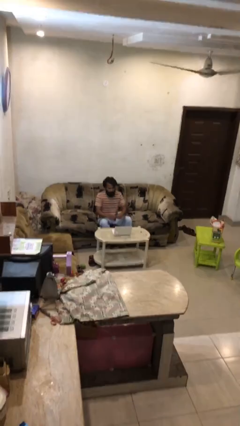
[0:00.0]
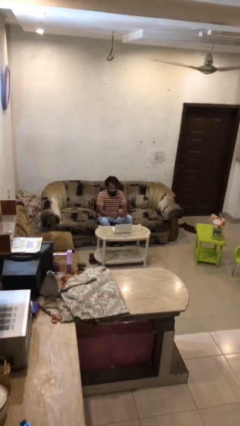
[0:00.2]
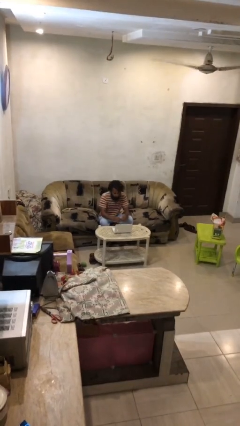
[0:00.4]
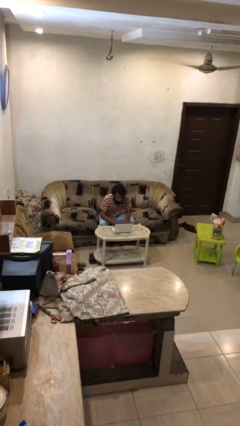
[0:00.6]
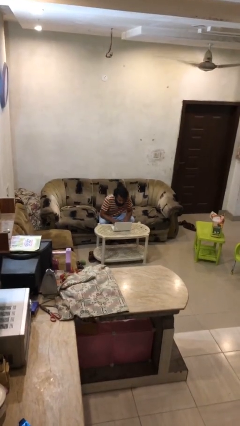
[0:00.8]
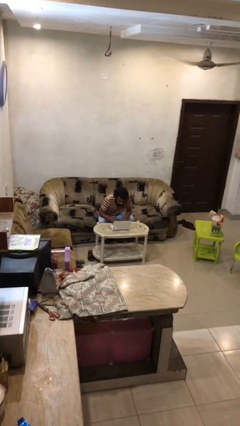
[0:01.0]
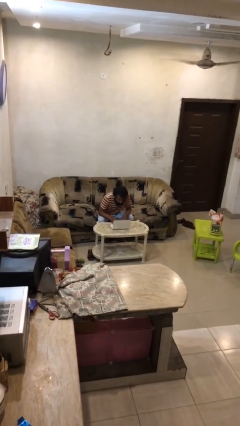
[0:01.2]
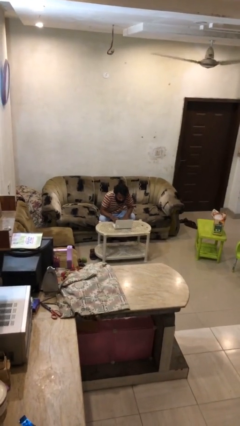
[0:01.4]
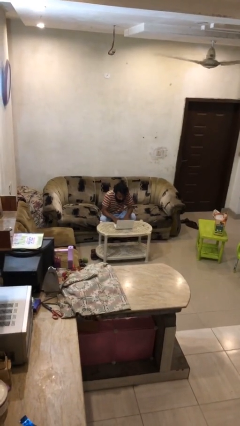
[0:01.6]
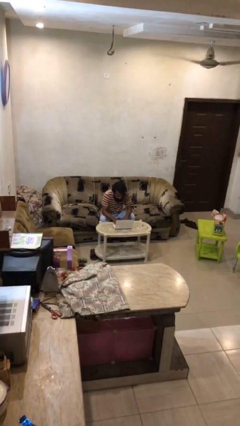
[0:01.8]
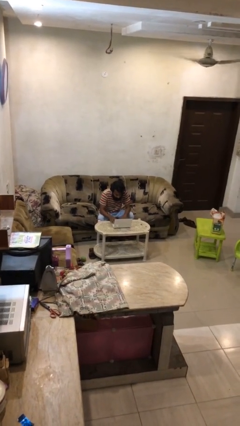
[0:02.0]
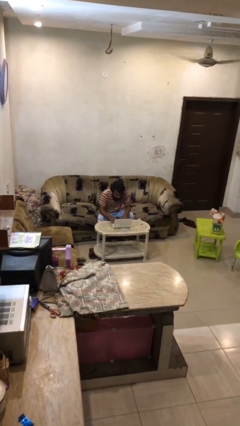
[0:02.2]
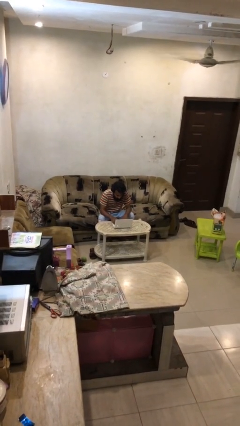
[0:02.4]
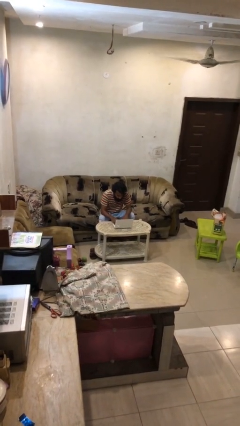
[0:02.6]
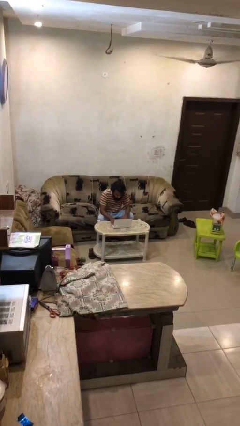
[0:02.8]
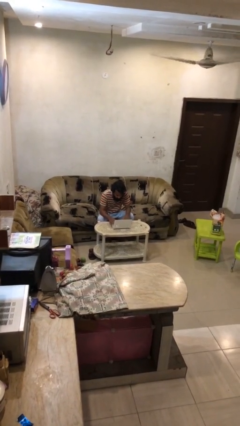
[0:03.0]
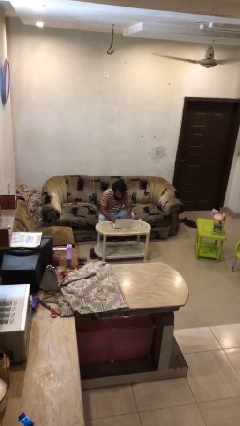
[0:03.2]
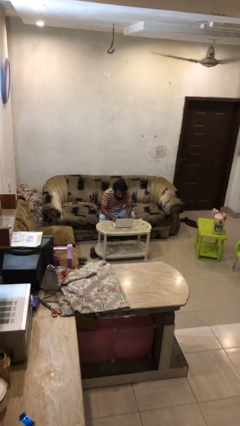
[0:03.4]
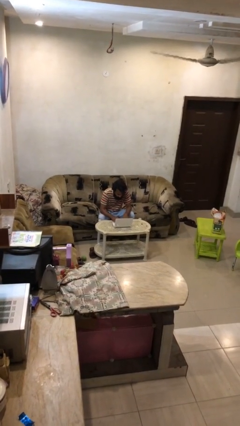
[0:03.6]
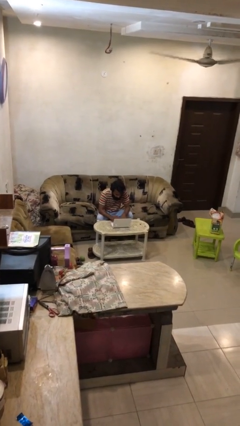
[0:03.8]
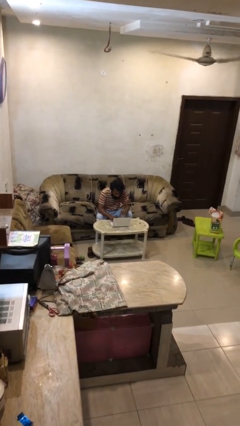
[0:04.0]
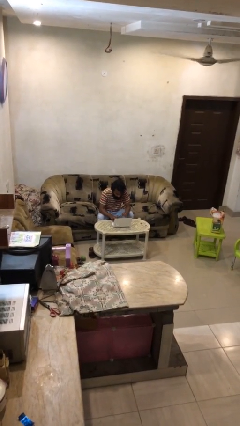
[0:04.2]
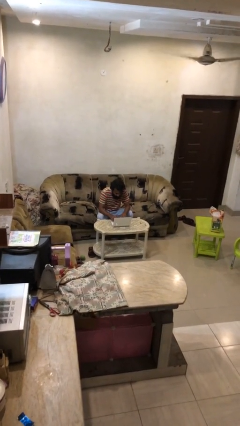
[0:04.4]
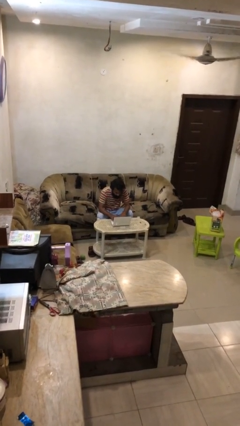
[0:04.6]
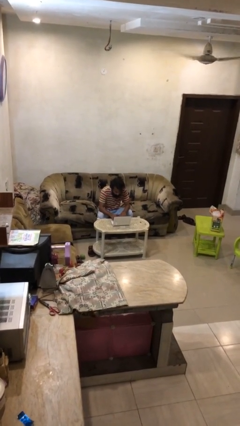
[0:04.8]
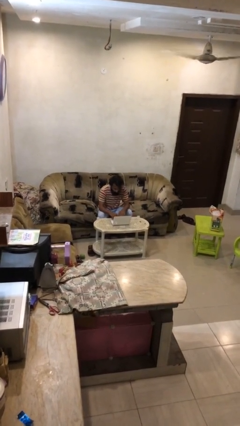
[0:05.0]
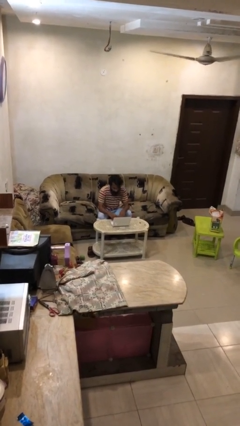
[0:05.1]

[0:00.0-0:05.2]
person interacts with laptop

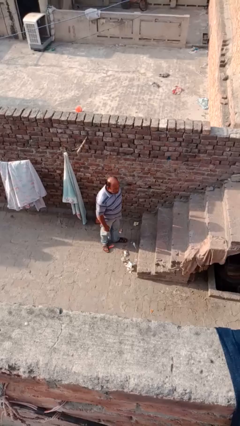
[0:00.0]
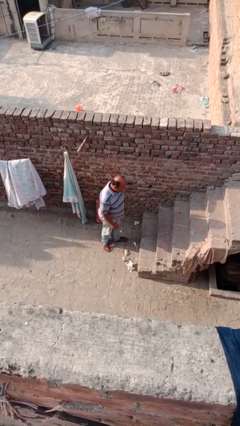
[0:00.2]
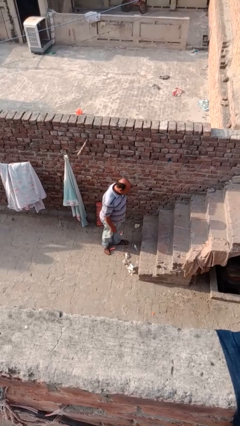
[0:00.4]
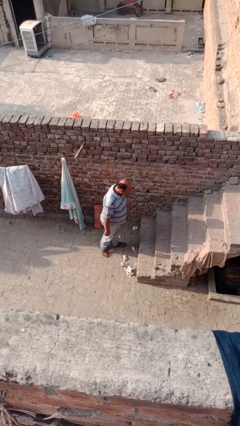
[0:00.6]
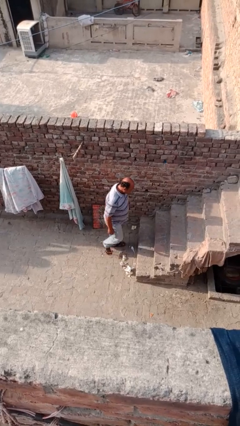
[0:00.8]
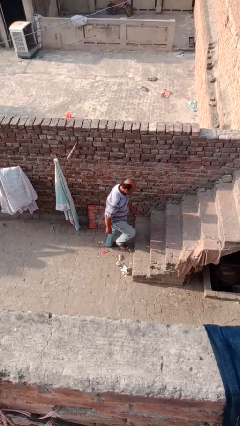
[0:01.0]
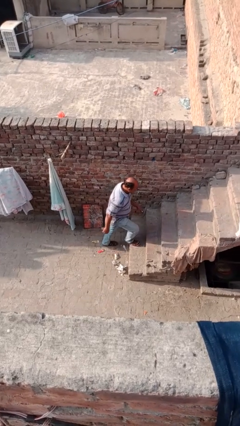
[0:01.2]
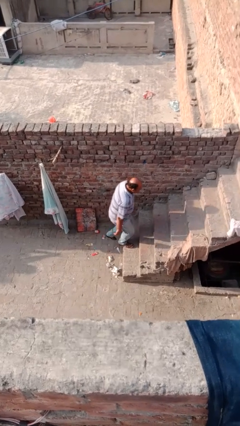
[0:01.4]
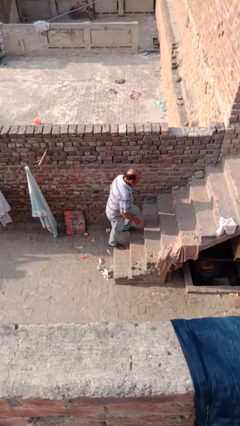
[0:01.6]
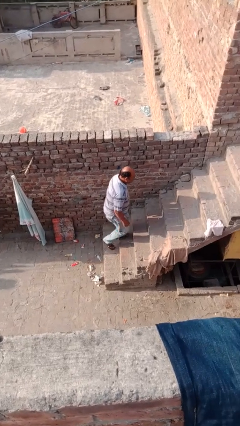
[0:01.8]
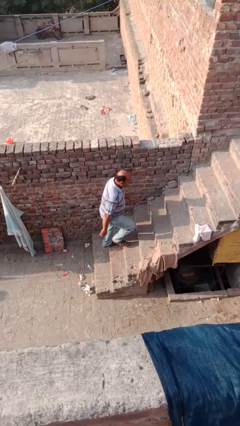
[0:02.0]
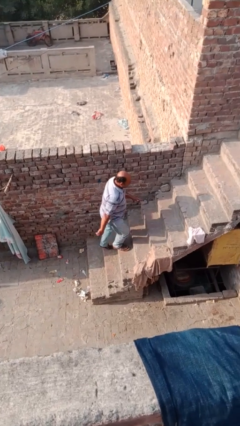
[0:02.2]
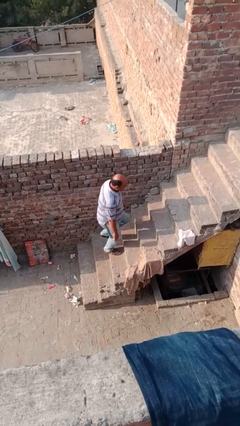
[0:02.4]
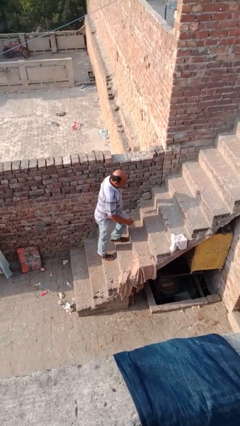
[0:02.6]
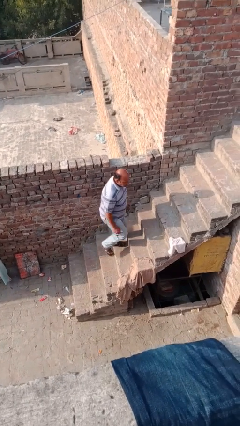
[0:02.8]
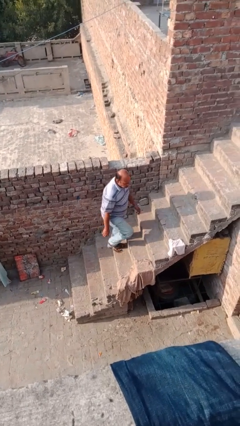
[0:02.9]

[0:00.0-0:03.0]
person climbs up stairs

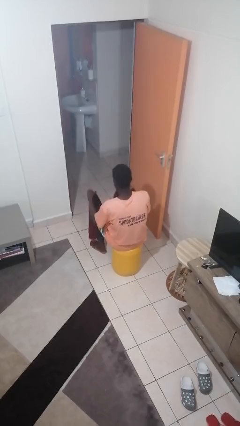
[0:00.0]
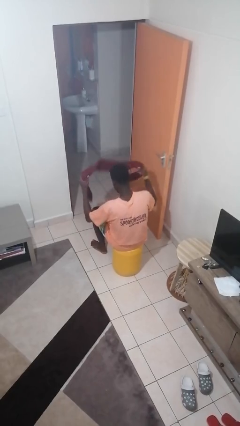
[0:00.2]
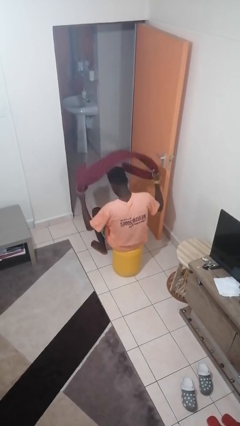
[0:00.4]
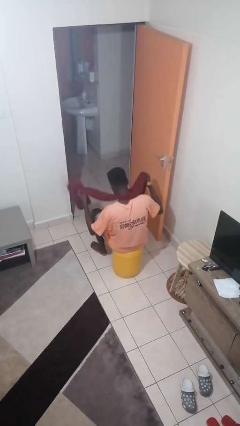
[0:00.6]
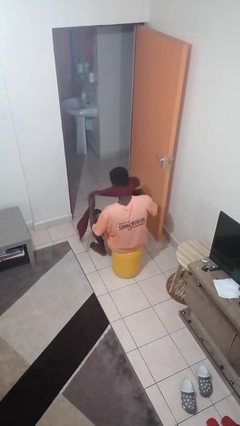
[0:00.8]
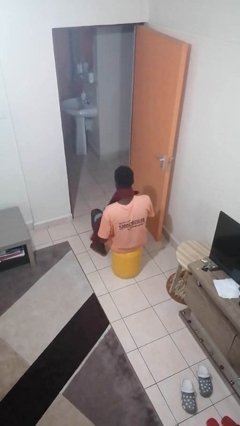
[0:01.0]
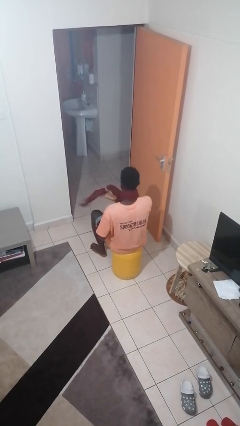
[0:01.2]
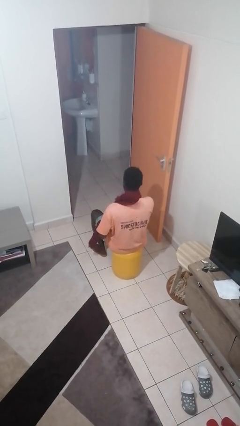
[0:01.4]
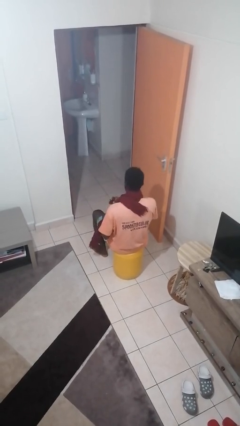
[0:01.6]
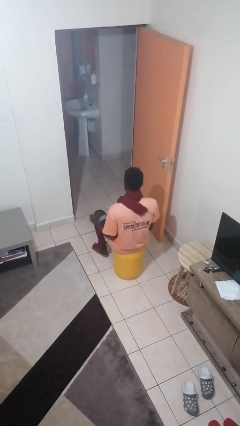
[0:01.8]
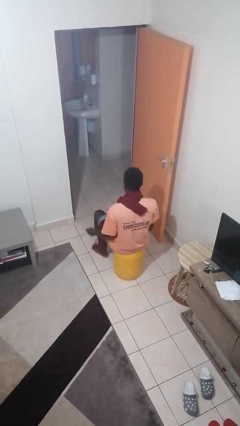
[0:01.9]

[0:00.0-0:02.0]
person puts on scarf

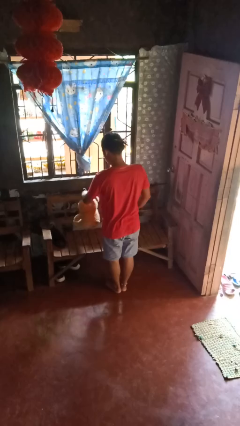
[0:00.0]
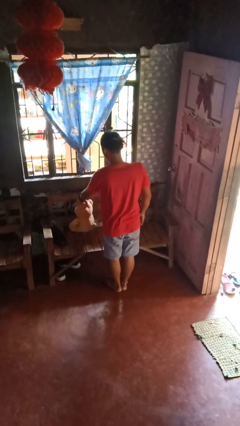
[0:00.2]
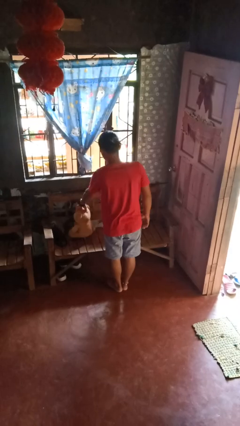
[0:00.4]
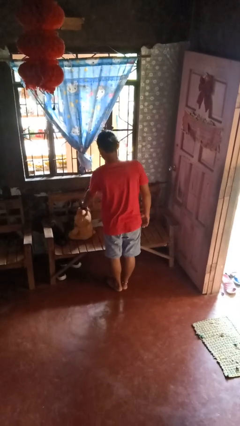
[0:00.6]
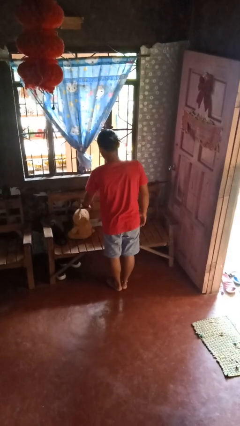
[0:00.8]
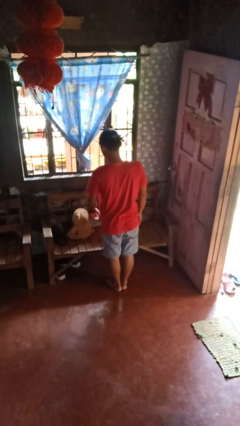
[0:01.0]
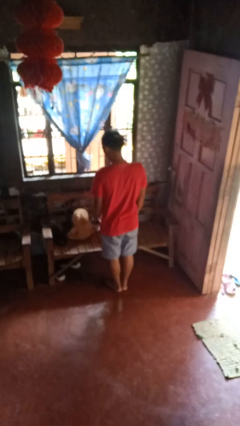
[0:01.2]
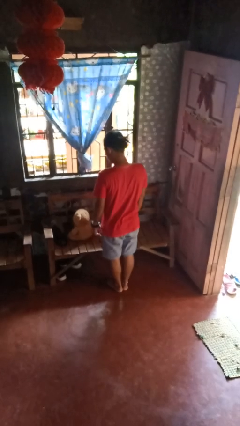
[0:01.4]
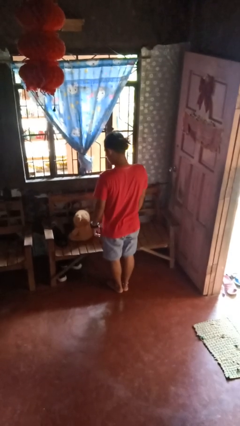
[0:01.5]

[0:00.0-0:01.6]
person puts down object on couch

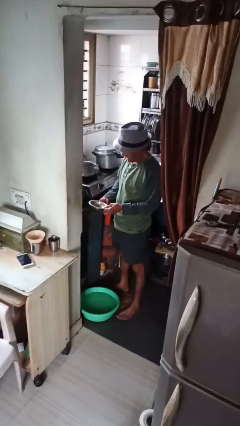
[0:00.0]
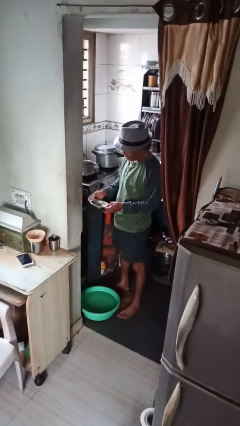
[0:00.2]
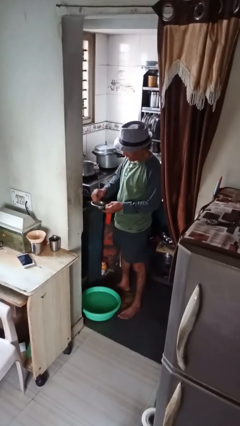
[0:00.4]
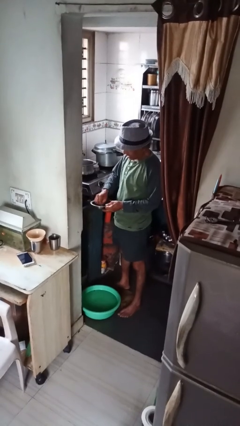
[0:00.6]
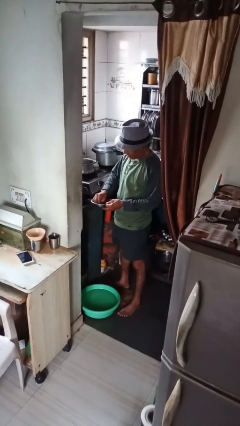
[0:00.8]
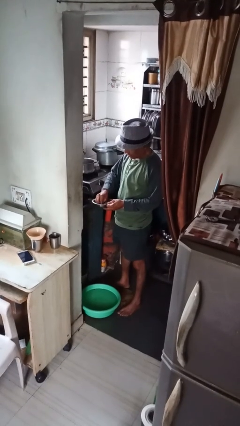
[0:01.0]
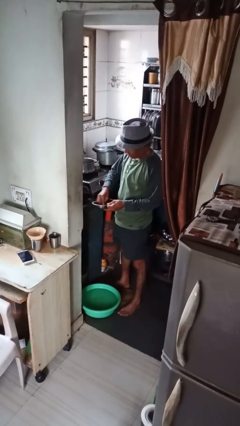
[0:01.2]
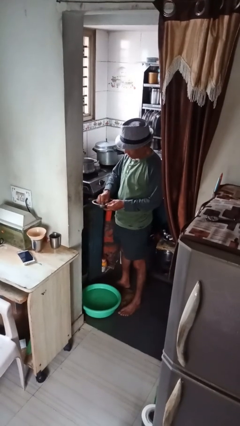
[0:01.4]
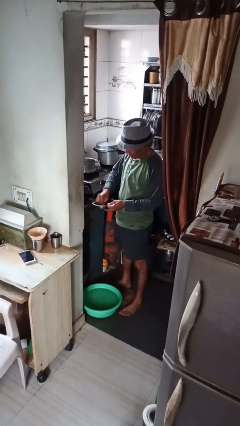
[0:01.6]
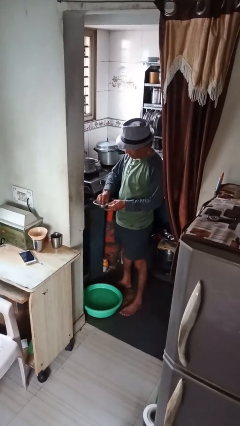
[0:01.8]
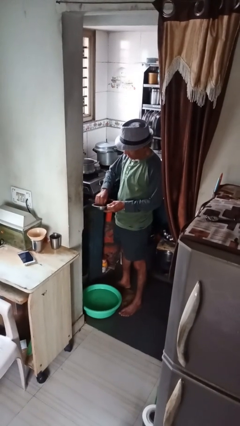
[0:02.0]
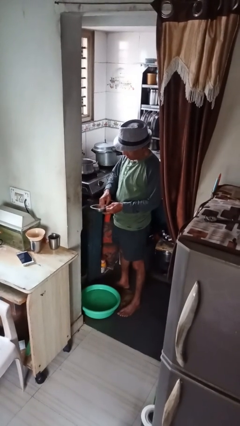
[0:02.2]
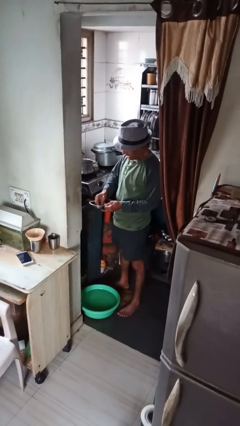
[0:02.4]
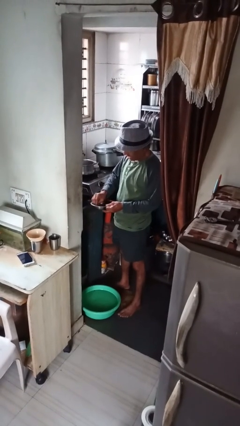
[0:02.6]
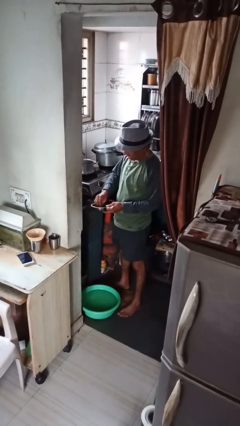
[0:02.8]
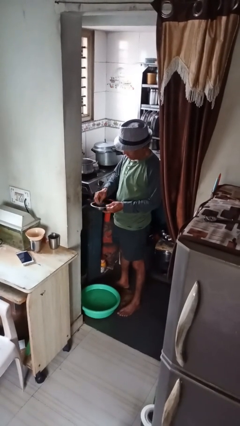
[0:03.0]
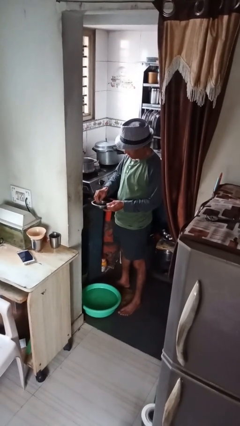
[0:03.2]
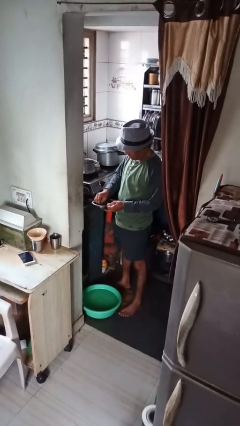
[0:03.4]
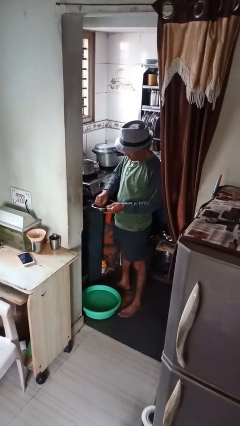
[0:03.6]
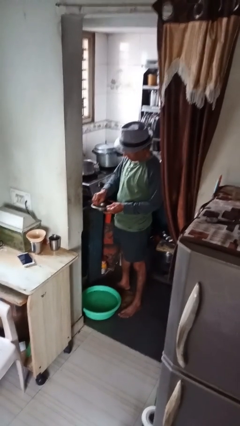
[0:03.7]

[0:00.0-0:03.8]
person washes dish

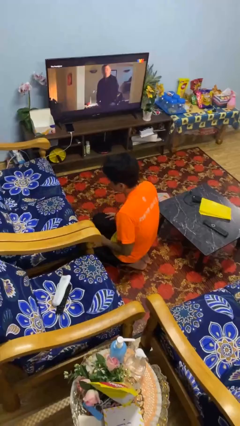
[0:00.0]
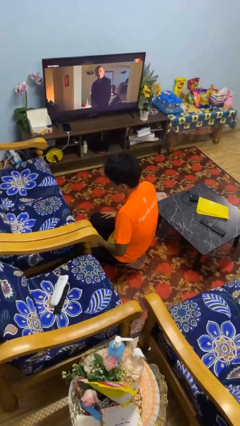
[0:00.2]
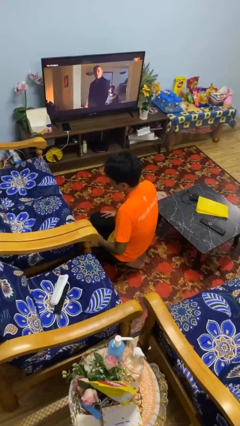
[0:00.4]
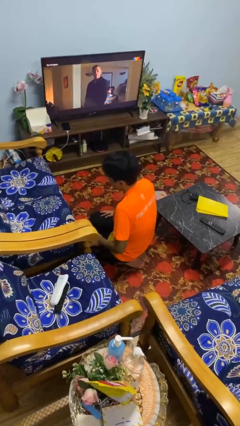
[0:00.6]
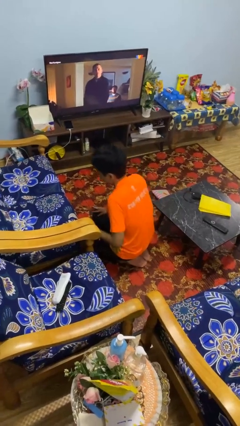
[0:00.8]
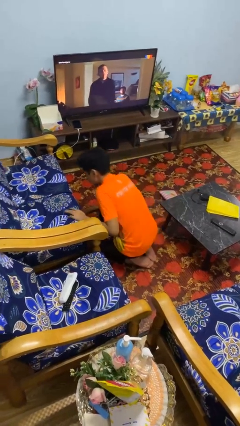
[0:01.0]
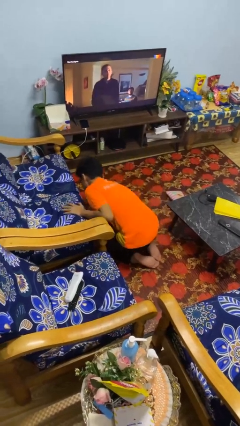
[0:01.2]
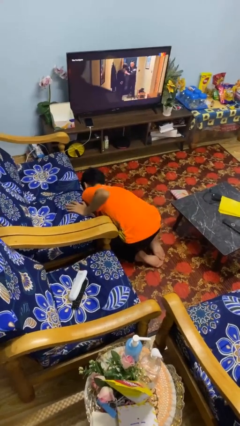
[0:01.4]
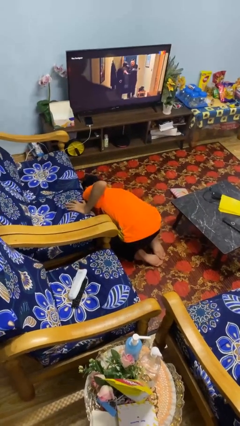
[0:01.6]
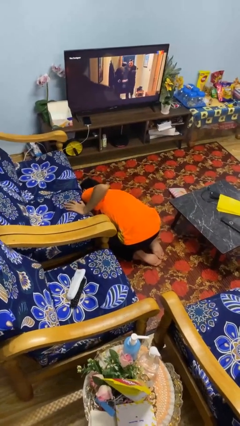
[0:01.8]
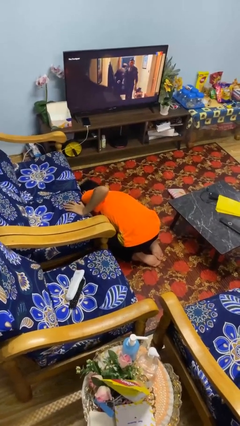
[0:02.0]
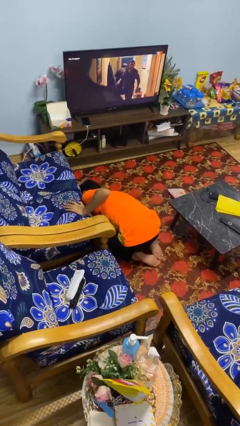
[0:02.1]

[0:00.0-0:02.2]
person searches under couch
